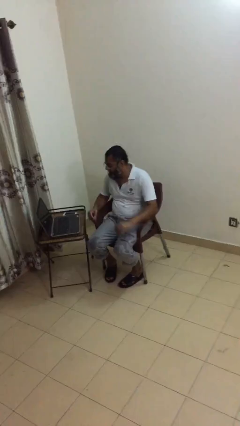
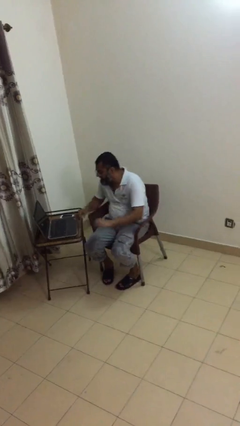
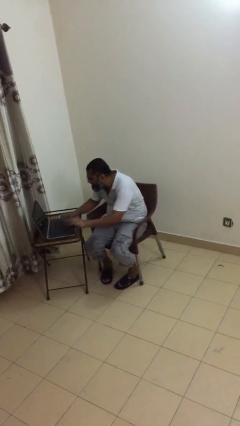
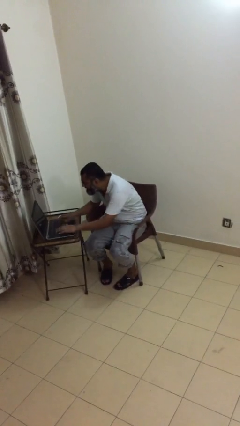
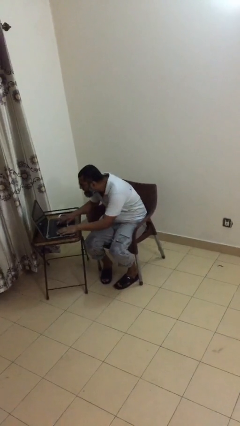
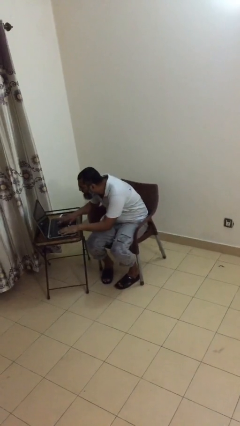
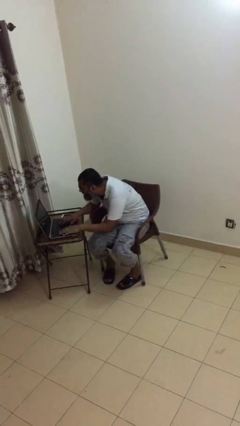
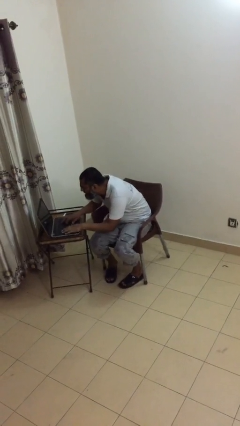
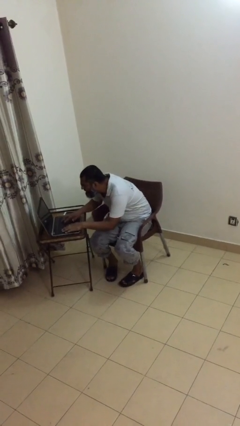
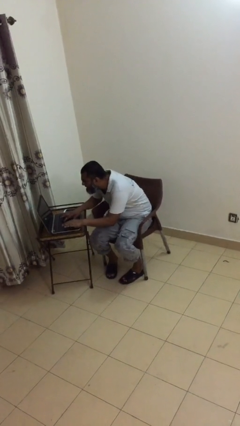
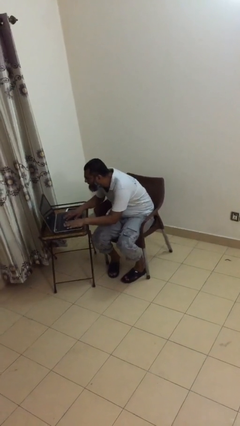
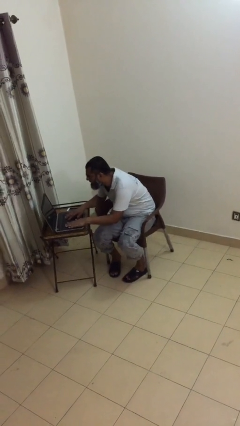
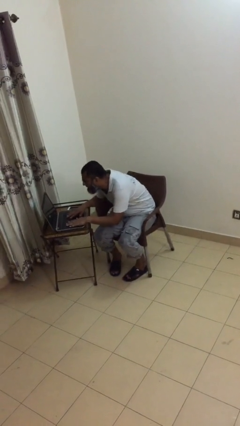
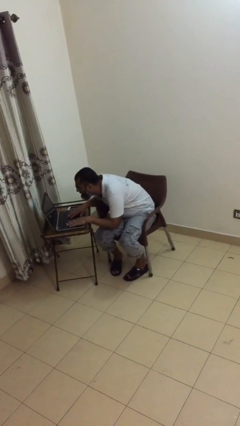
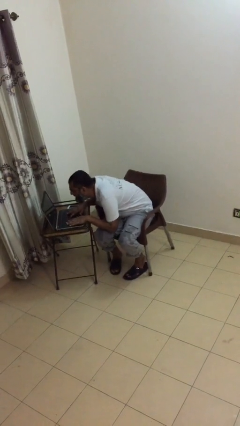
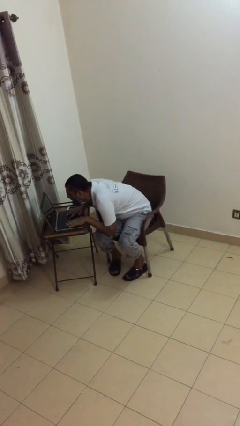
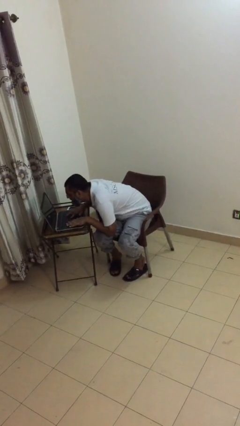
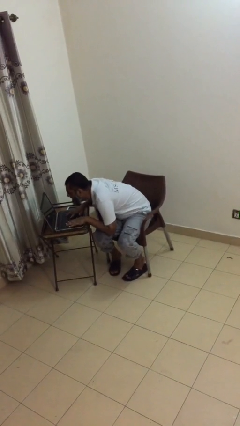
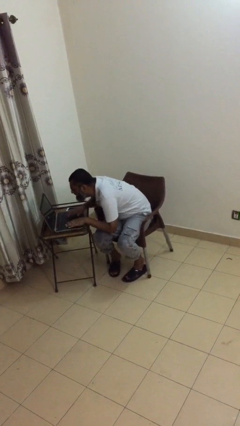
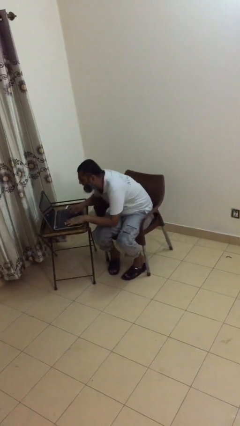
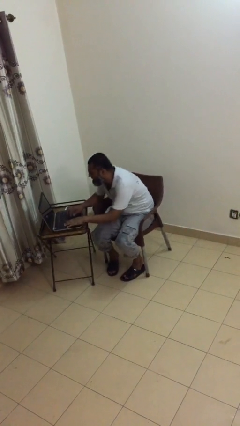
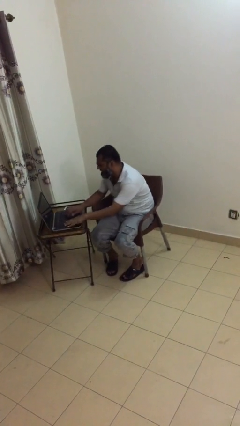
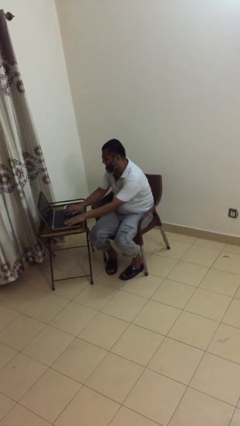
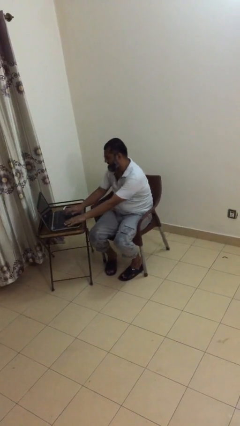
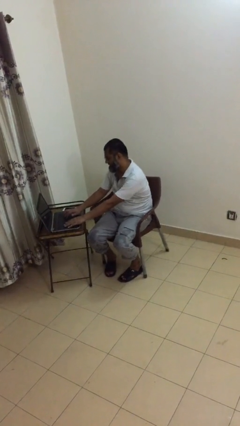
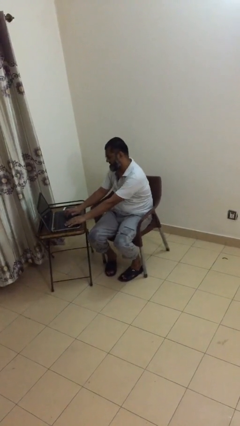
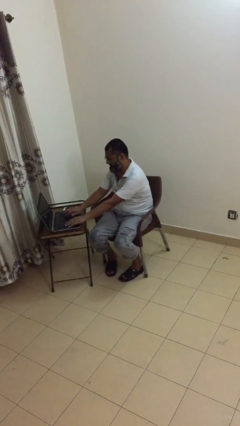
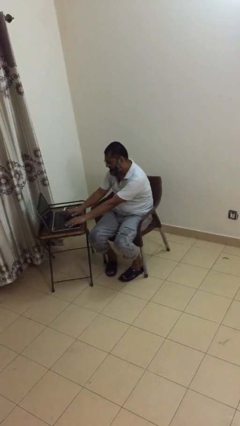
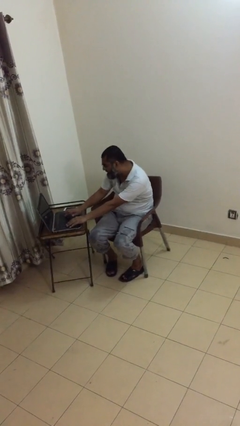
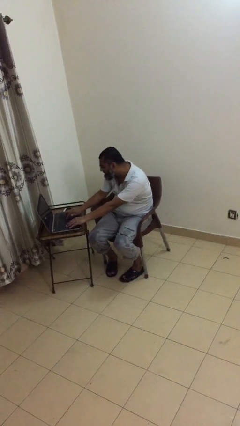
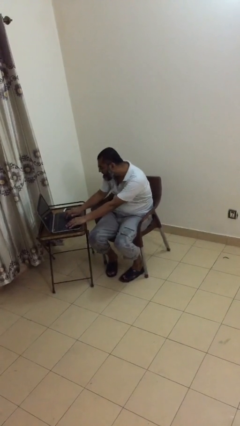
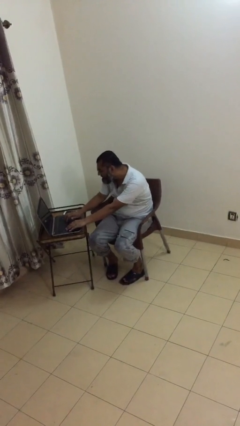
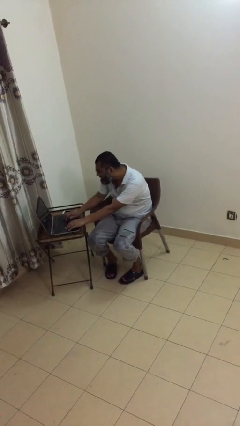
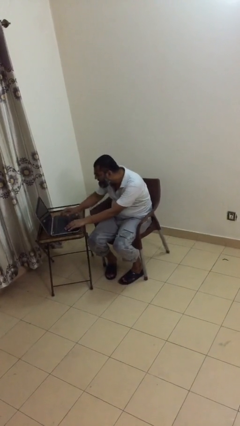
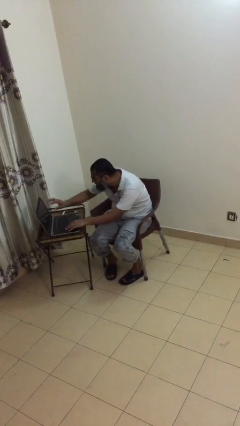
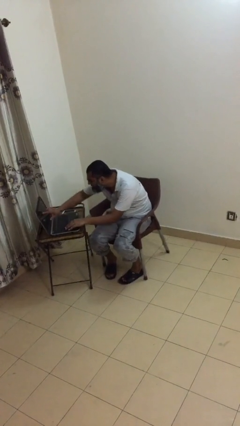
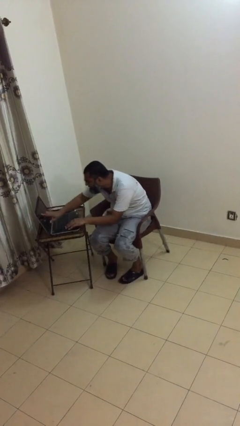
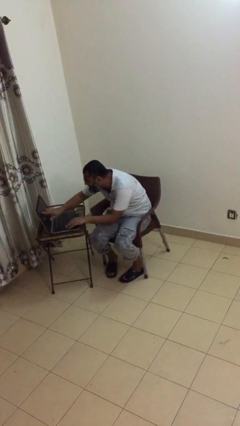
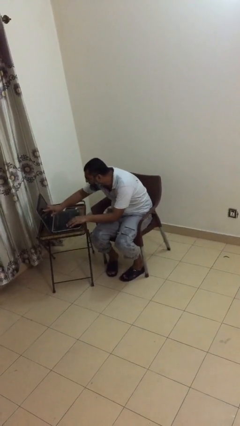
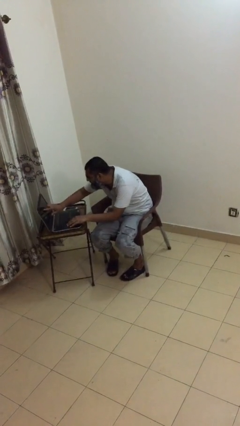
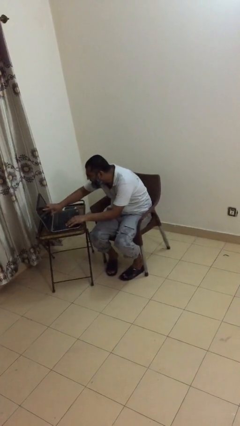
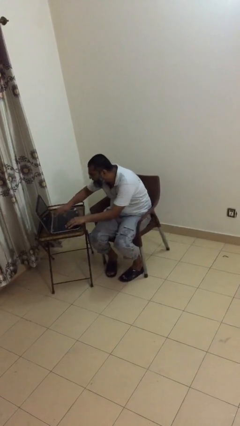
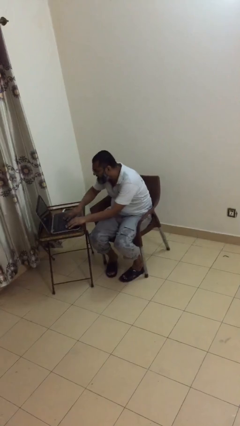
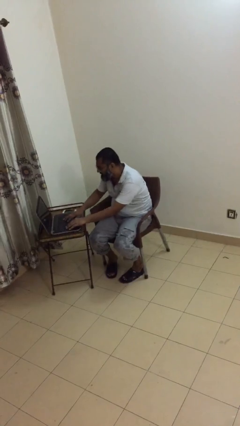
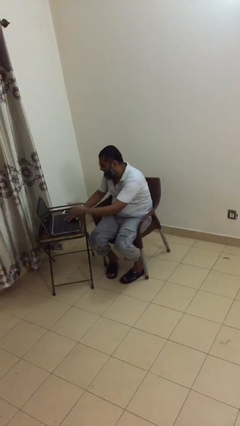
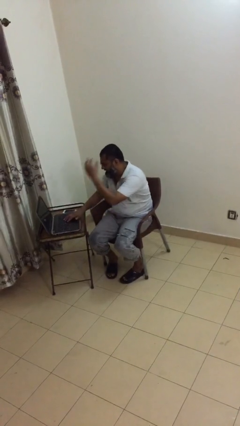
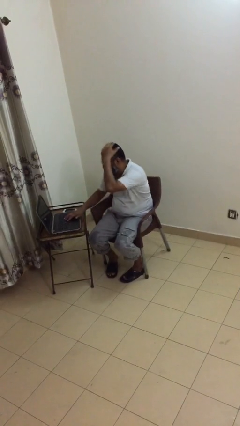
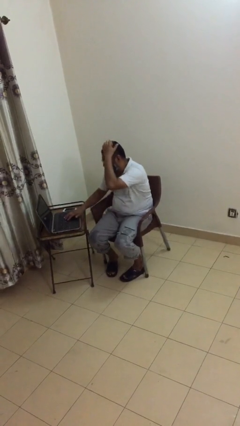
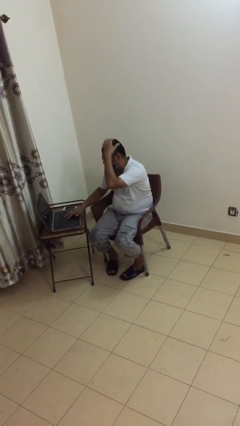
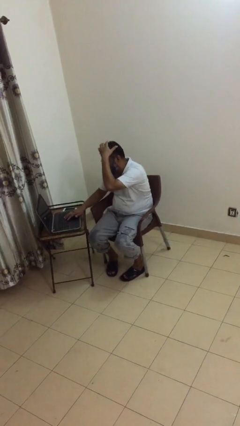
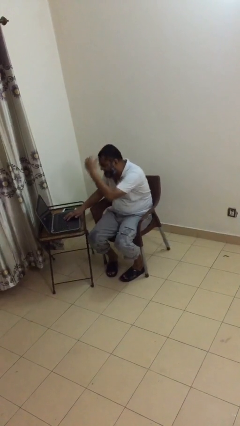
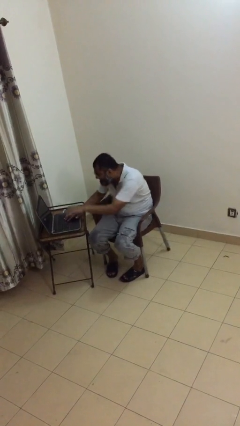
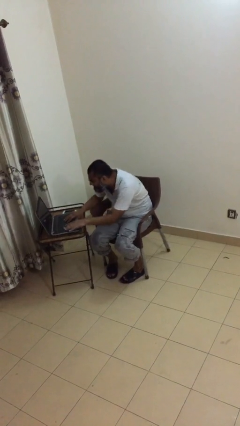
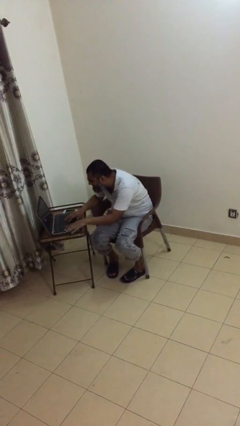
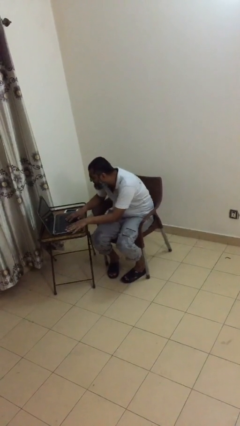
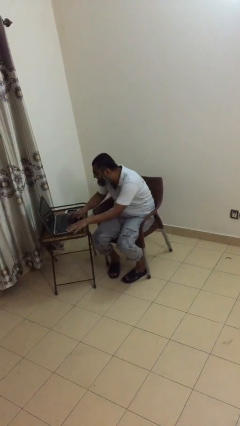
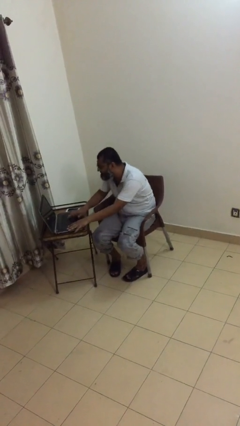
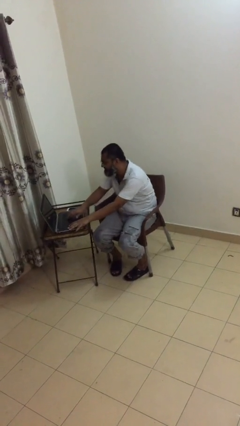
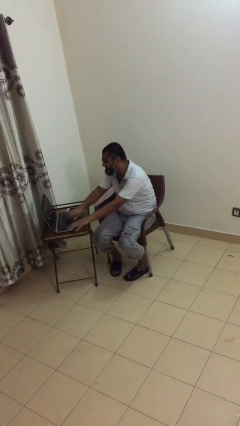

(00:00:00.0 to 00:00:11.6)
person interacts with laptop

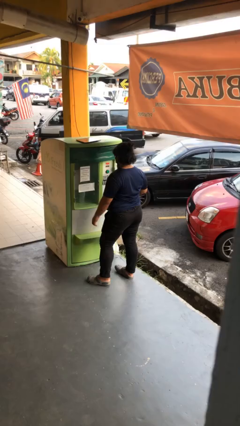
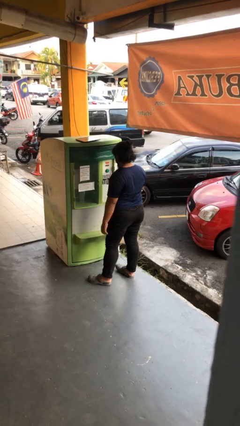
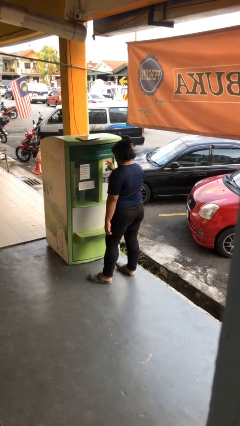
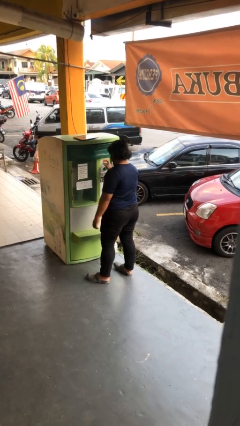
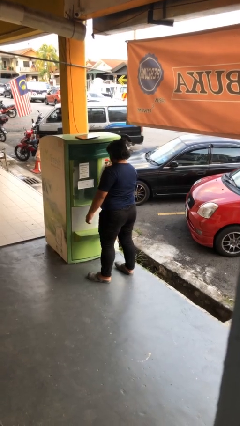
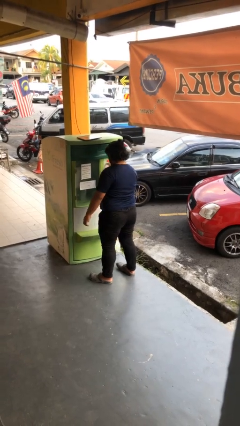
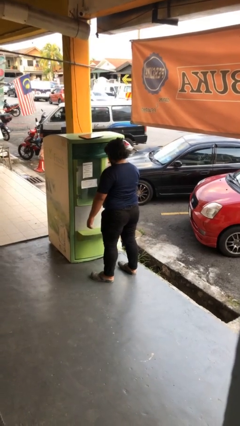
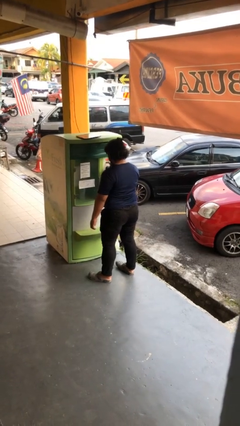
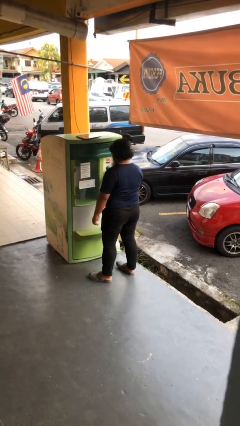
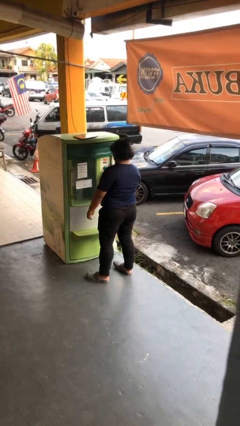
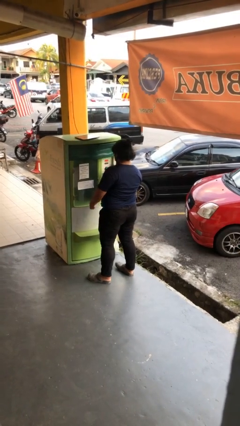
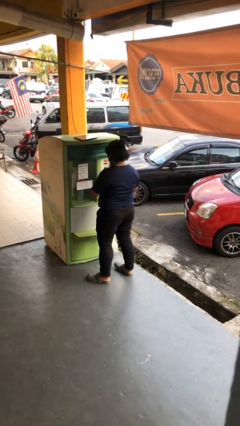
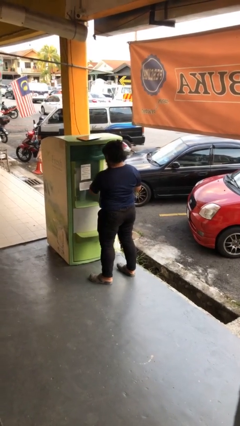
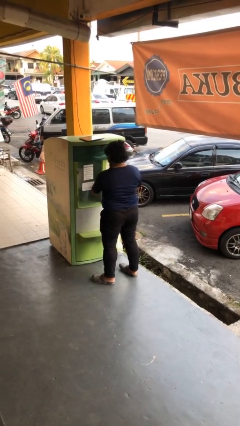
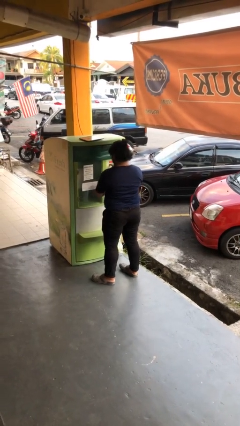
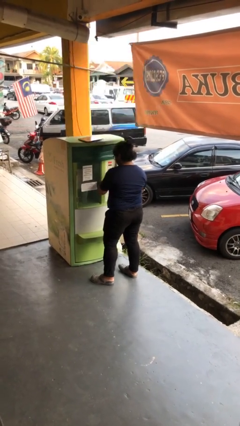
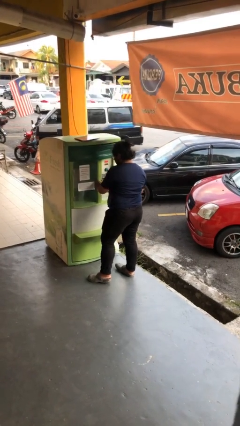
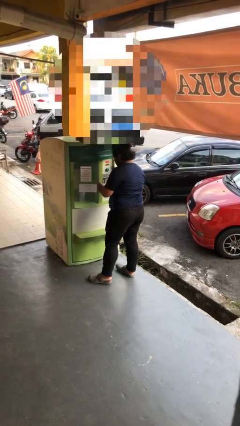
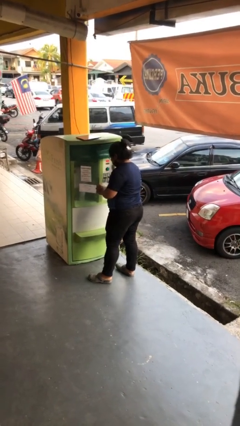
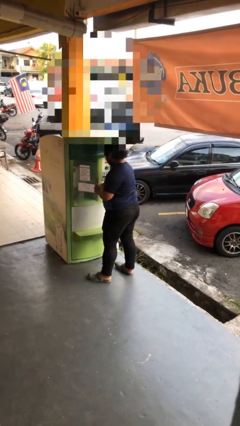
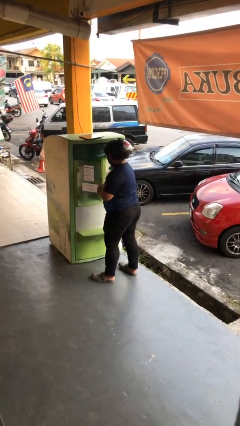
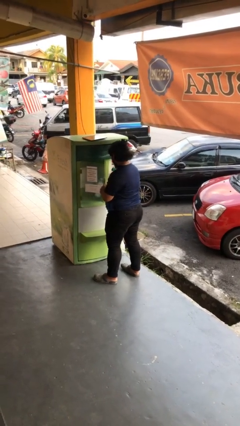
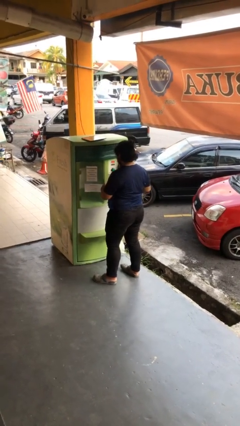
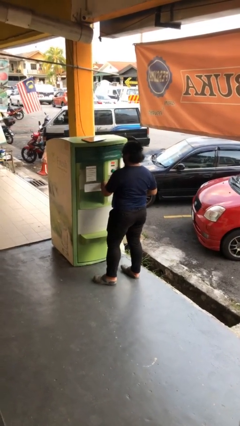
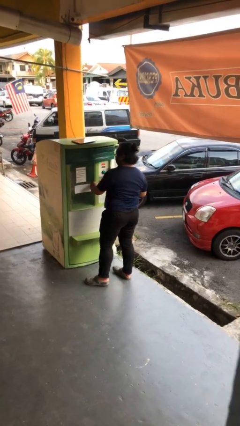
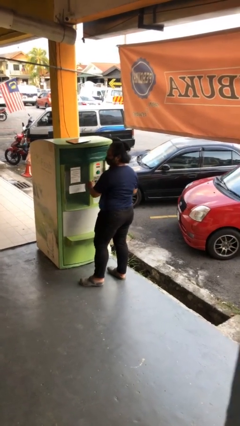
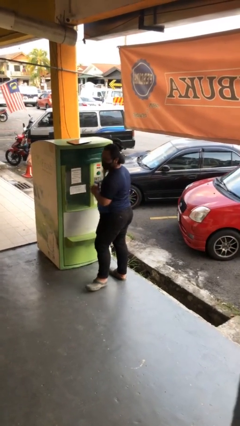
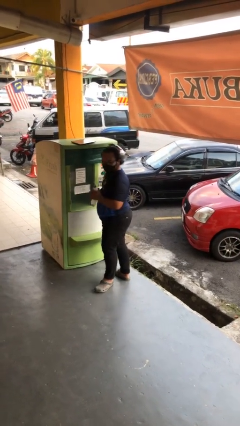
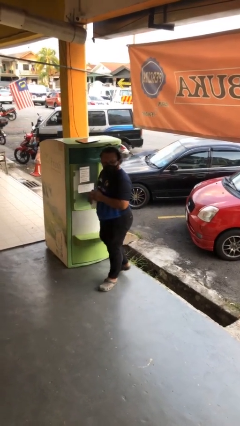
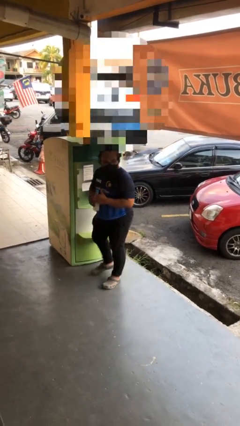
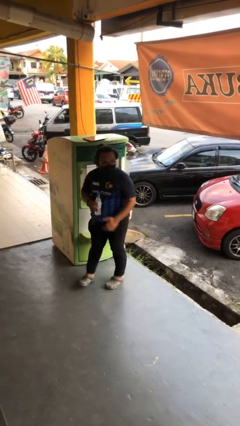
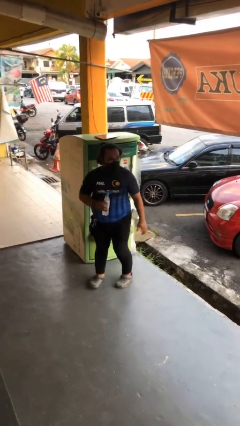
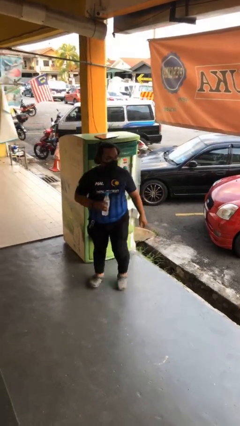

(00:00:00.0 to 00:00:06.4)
person purchases from machine
